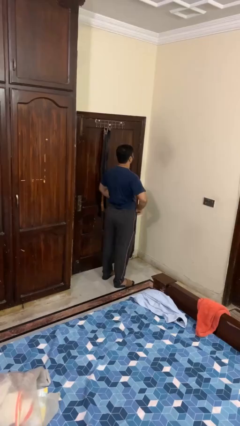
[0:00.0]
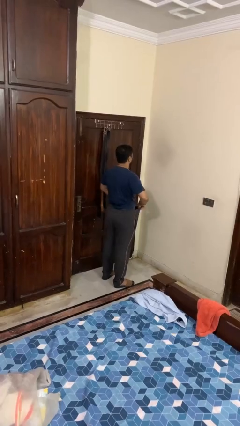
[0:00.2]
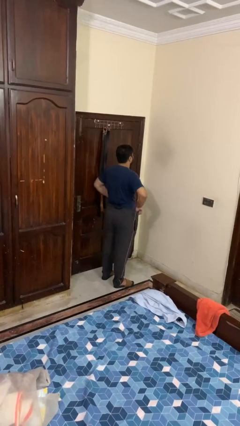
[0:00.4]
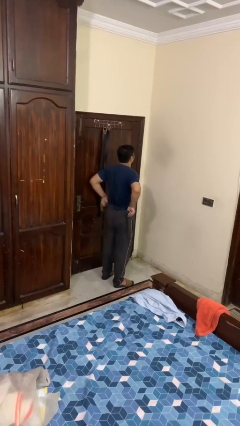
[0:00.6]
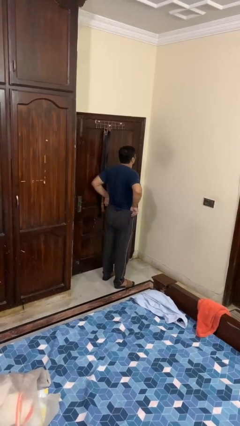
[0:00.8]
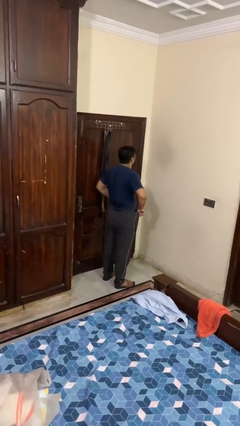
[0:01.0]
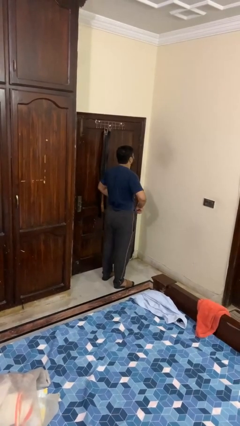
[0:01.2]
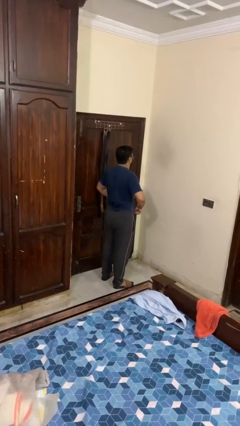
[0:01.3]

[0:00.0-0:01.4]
person hikes up pants

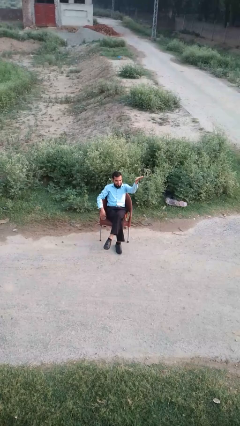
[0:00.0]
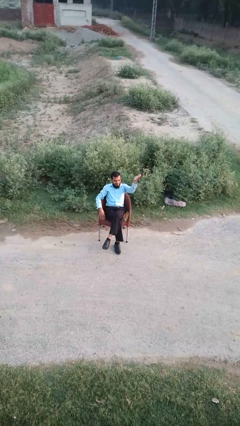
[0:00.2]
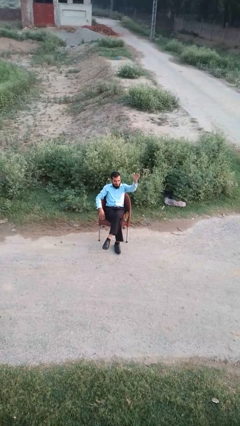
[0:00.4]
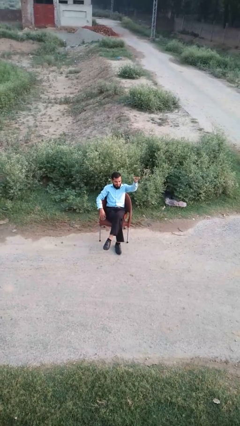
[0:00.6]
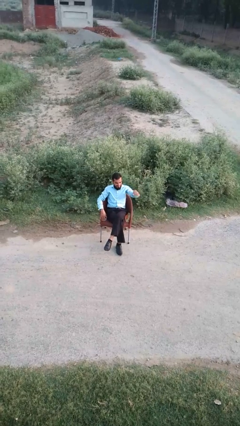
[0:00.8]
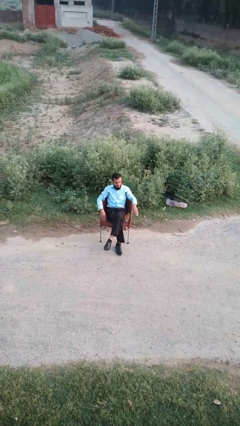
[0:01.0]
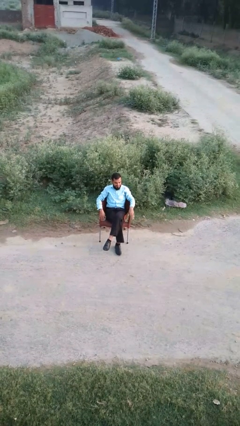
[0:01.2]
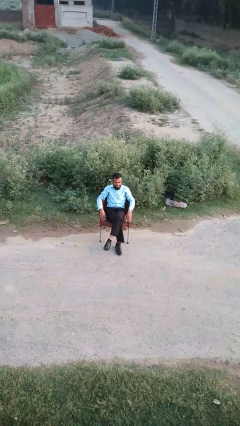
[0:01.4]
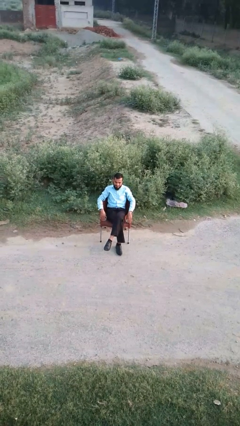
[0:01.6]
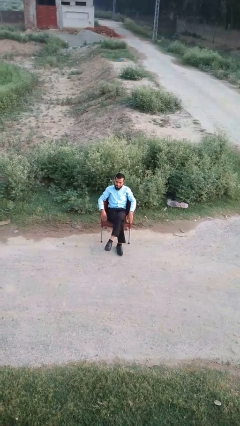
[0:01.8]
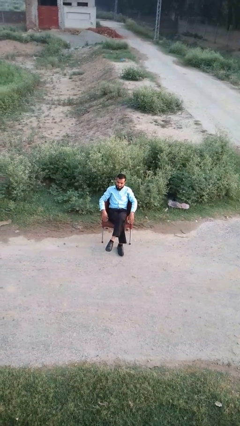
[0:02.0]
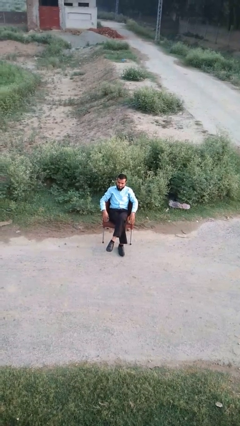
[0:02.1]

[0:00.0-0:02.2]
person gestures swipe down

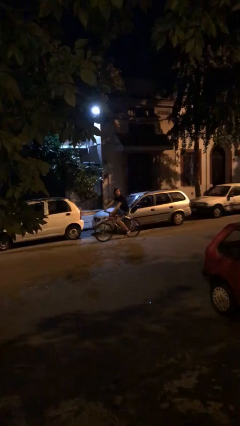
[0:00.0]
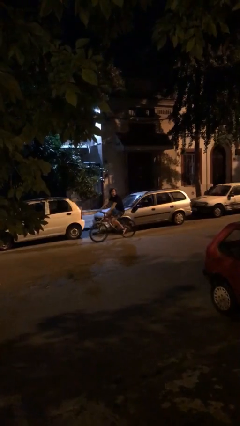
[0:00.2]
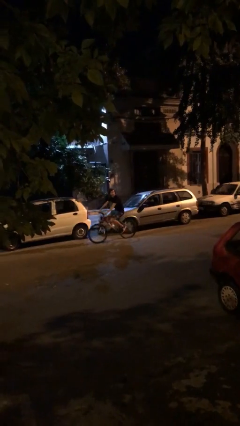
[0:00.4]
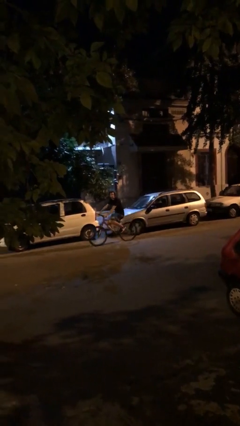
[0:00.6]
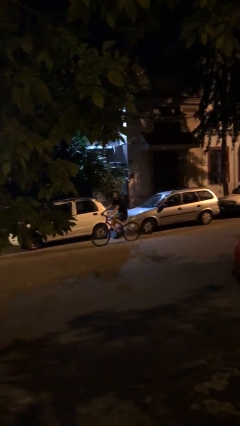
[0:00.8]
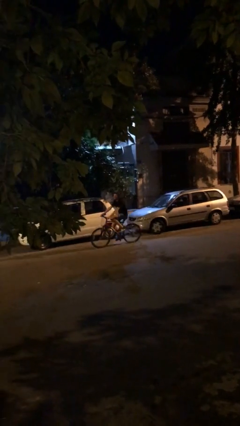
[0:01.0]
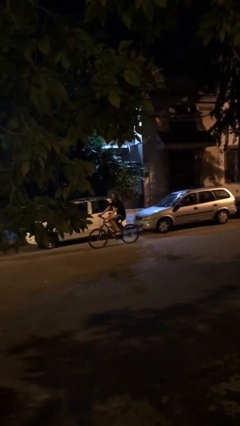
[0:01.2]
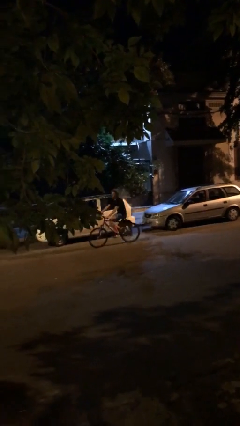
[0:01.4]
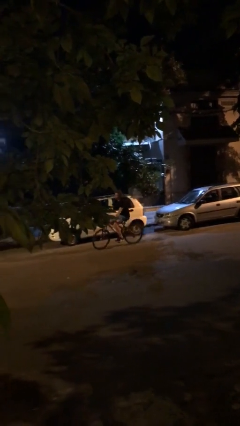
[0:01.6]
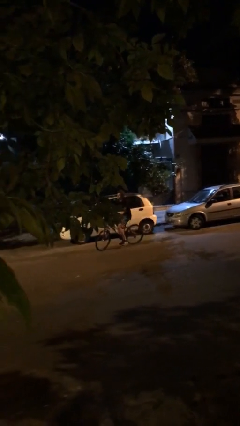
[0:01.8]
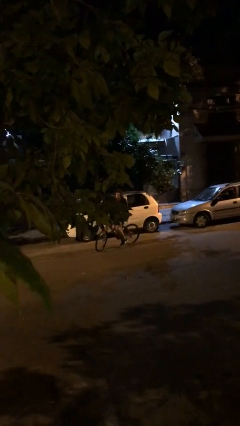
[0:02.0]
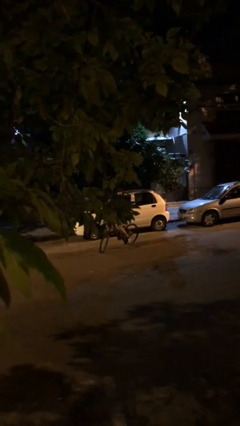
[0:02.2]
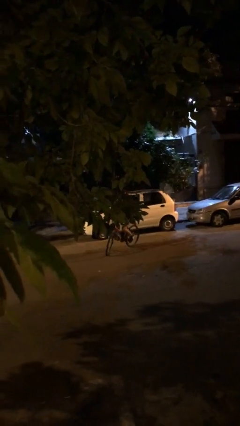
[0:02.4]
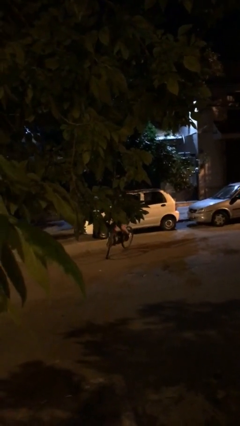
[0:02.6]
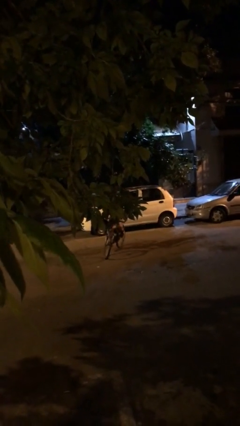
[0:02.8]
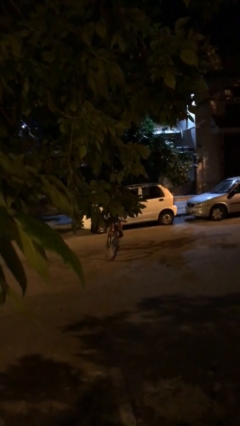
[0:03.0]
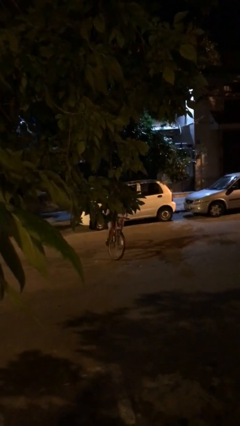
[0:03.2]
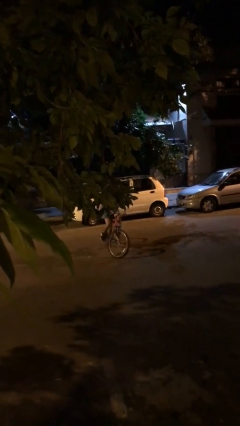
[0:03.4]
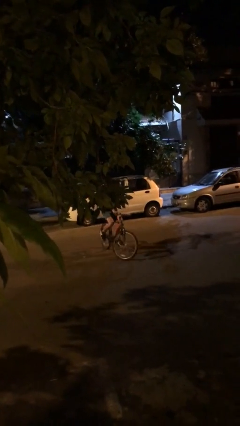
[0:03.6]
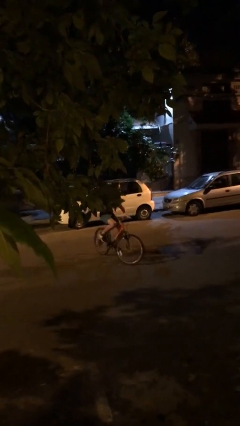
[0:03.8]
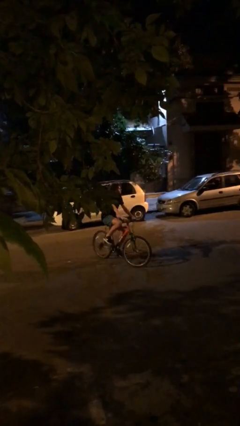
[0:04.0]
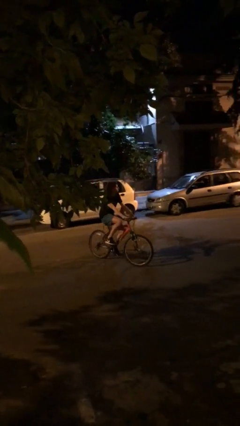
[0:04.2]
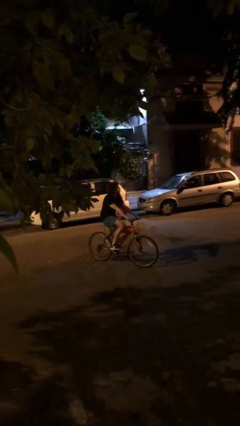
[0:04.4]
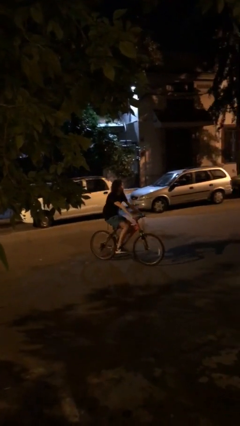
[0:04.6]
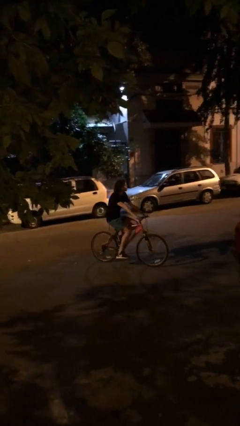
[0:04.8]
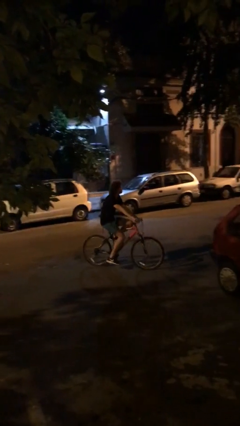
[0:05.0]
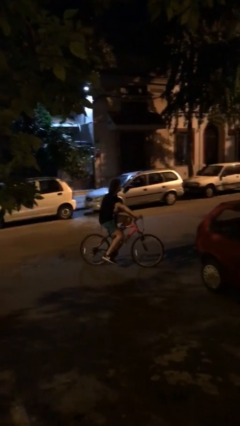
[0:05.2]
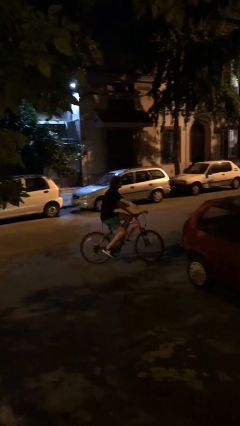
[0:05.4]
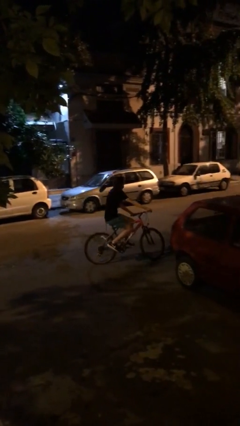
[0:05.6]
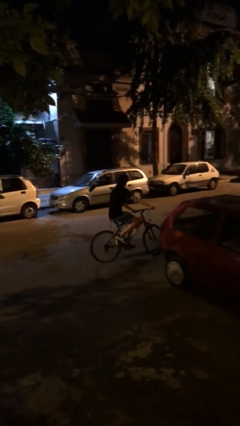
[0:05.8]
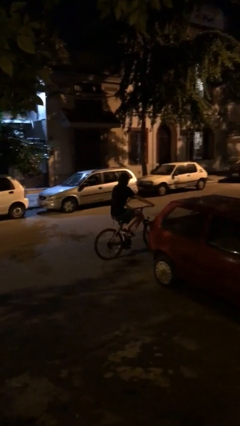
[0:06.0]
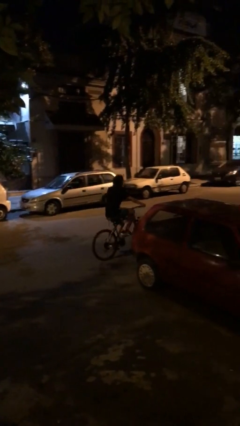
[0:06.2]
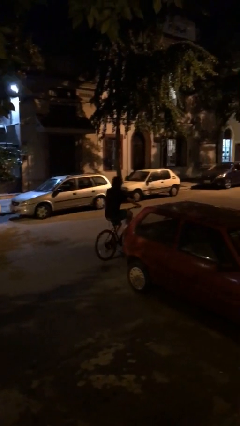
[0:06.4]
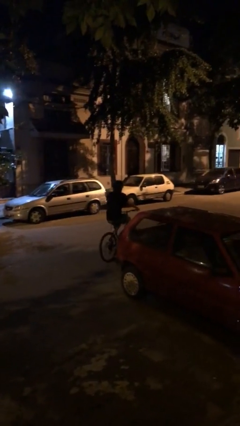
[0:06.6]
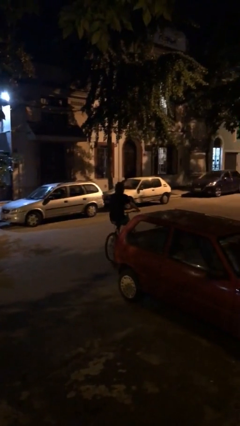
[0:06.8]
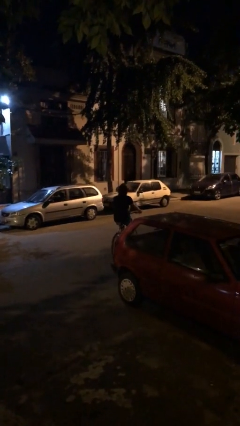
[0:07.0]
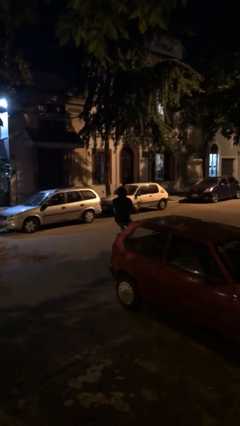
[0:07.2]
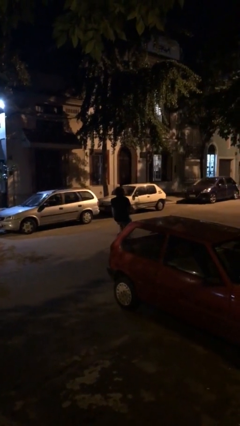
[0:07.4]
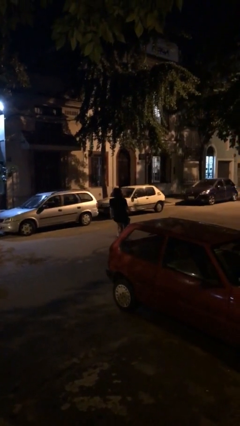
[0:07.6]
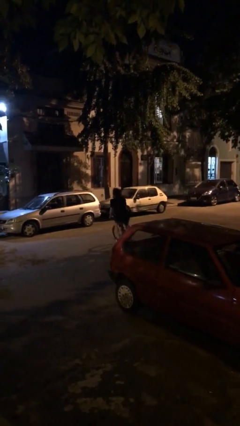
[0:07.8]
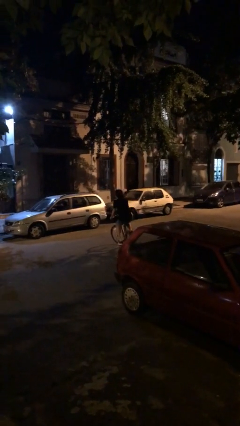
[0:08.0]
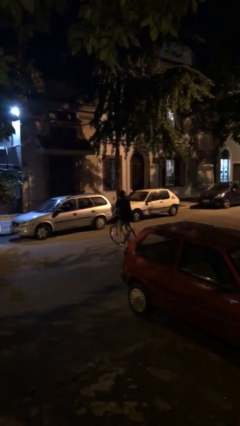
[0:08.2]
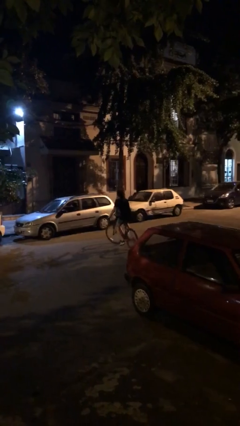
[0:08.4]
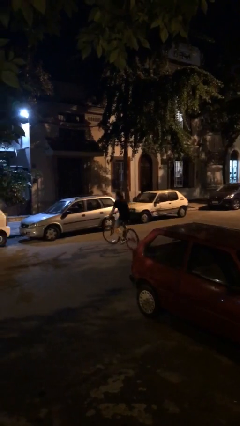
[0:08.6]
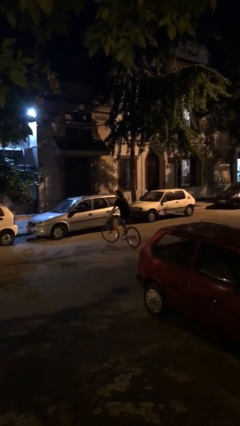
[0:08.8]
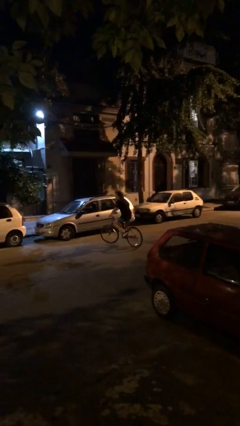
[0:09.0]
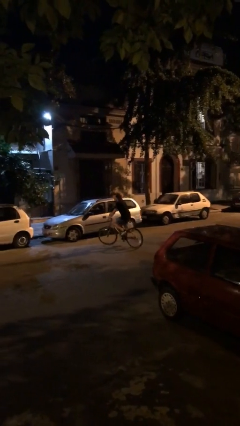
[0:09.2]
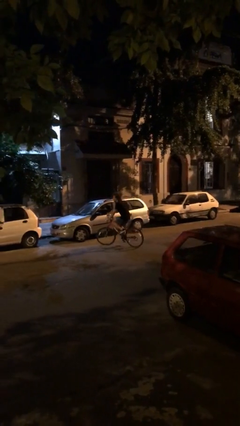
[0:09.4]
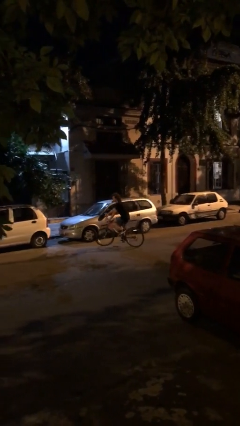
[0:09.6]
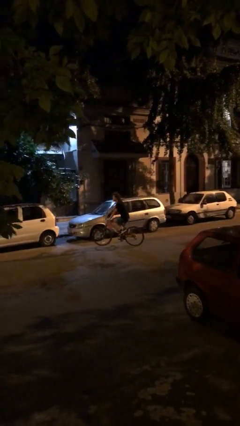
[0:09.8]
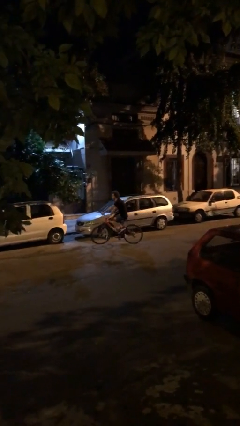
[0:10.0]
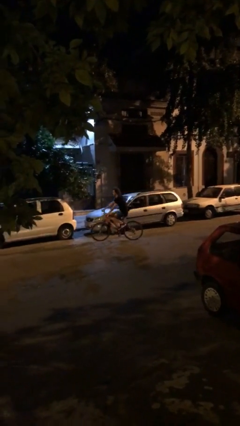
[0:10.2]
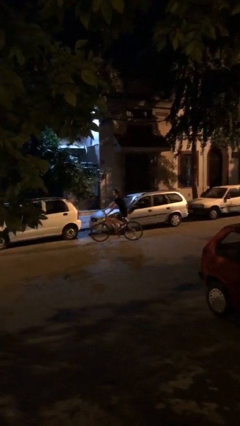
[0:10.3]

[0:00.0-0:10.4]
person rides bicycle

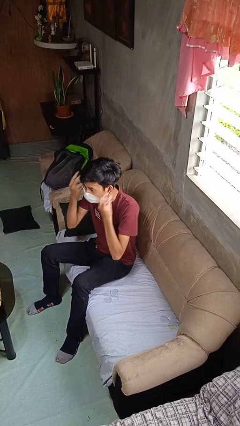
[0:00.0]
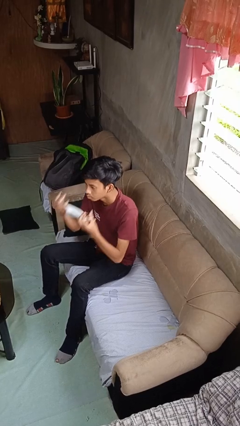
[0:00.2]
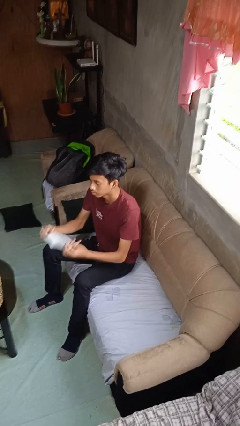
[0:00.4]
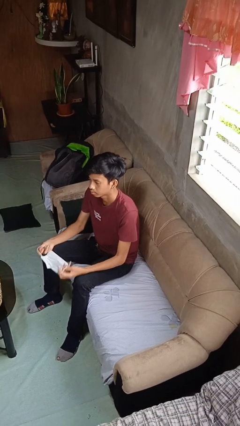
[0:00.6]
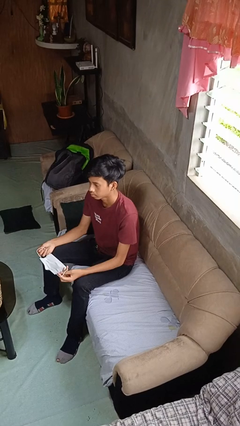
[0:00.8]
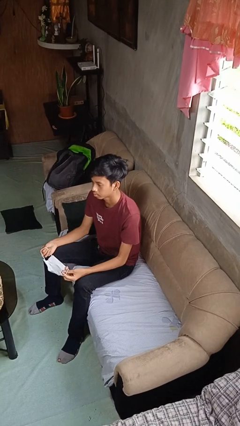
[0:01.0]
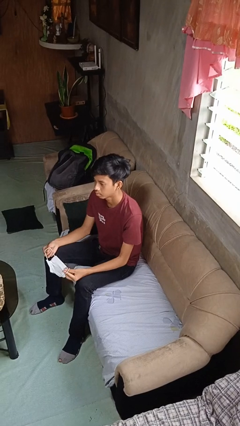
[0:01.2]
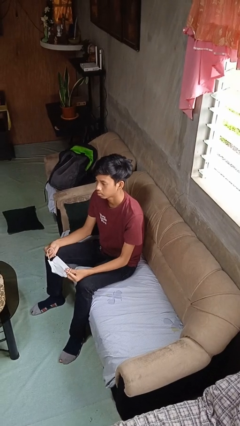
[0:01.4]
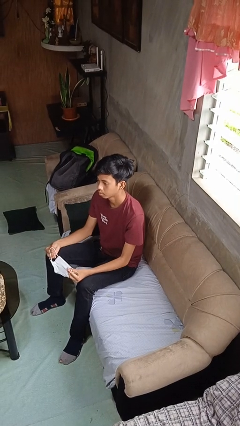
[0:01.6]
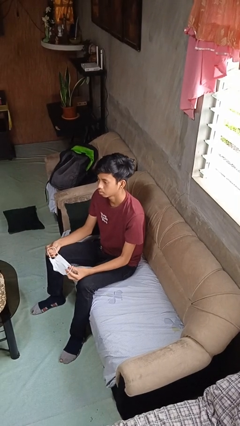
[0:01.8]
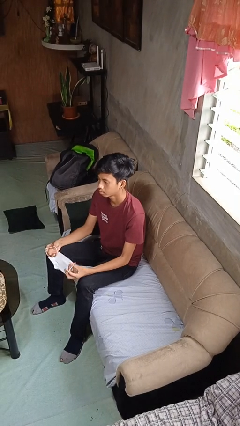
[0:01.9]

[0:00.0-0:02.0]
person takes off facemask

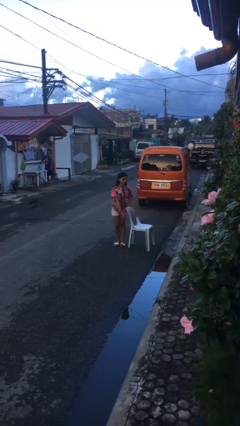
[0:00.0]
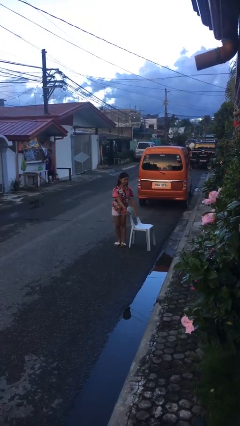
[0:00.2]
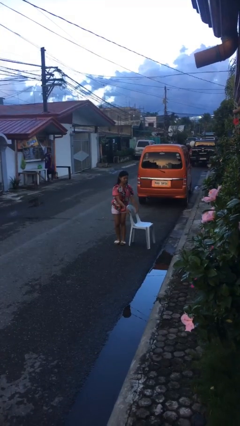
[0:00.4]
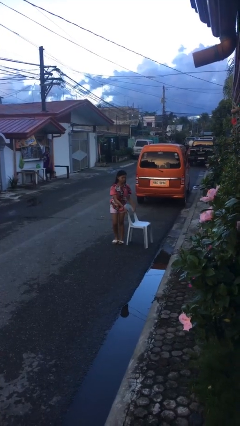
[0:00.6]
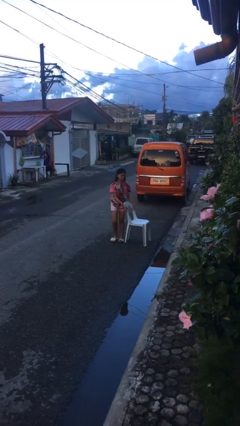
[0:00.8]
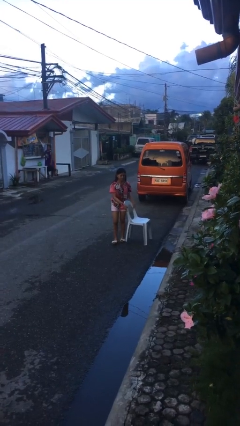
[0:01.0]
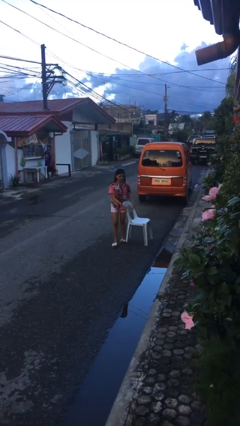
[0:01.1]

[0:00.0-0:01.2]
person picks up object from floor
